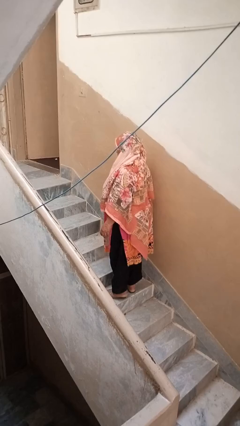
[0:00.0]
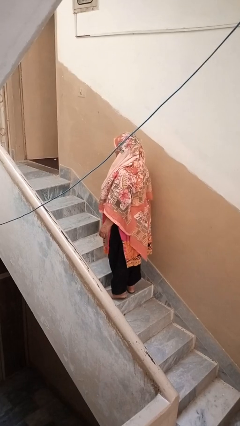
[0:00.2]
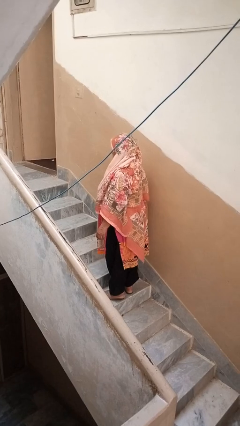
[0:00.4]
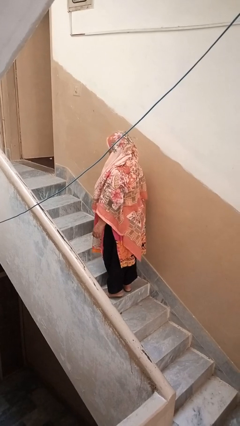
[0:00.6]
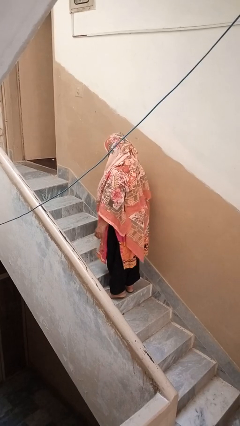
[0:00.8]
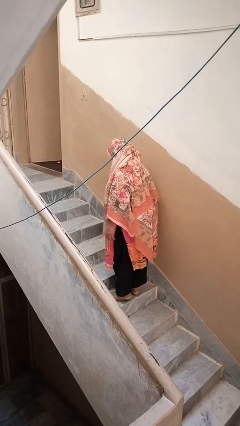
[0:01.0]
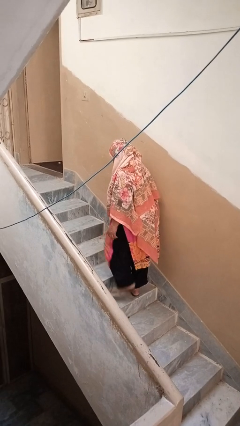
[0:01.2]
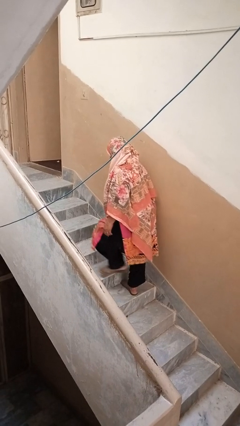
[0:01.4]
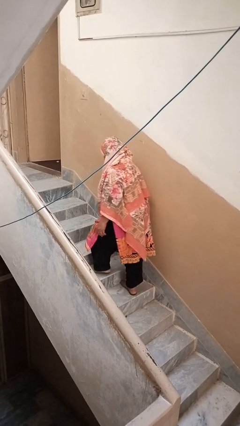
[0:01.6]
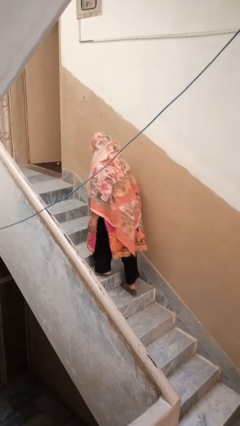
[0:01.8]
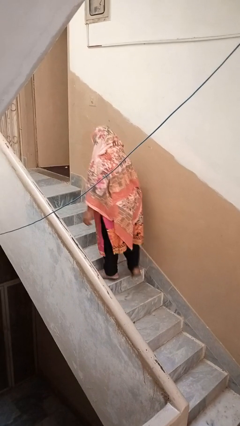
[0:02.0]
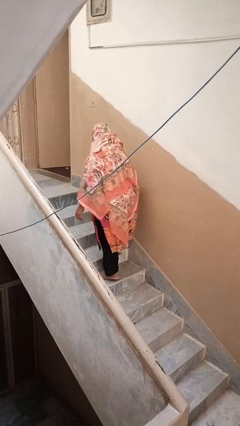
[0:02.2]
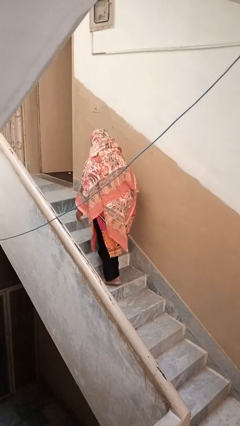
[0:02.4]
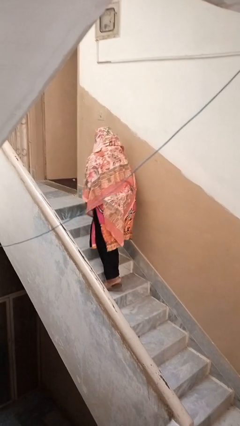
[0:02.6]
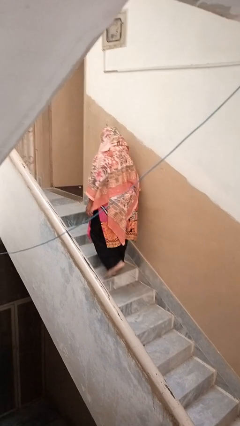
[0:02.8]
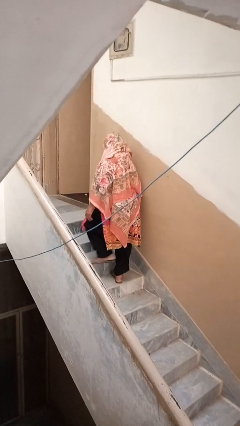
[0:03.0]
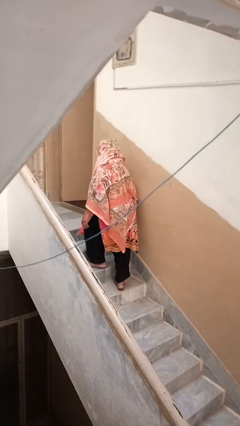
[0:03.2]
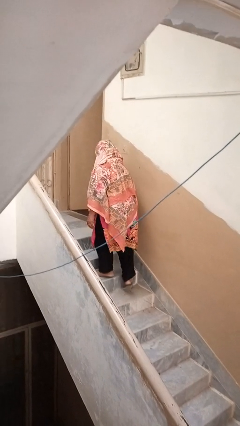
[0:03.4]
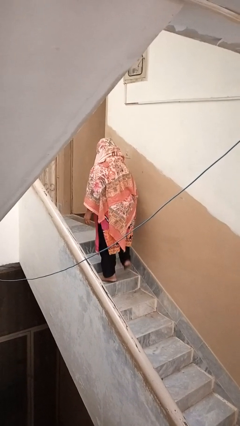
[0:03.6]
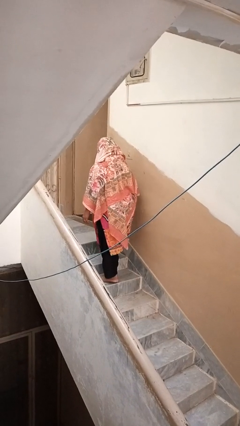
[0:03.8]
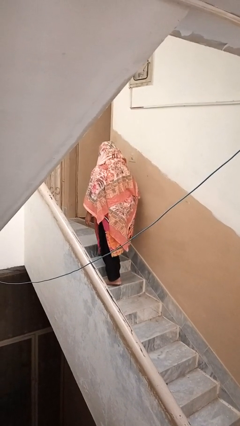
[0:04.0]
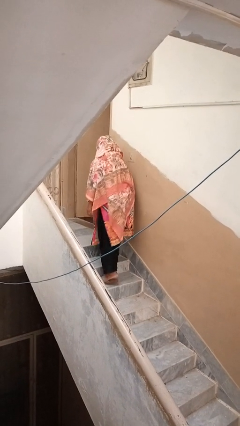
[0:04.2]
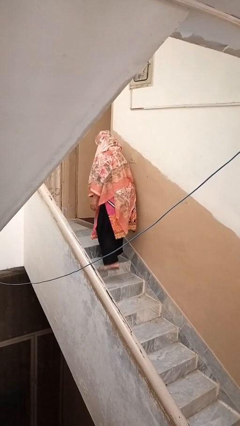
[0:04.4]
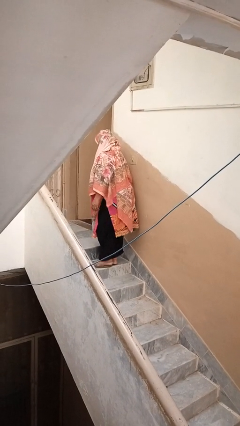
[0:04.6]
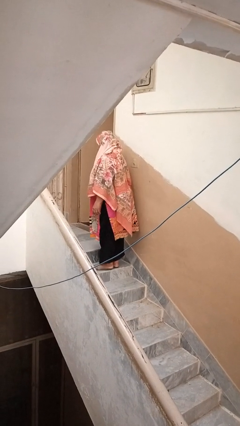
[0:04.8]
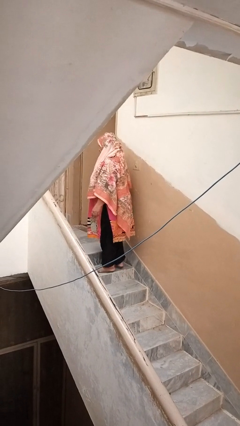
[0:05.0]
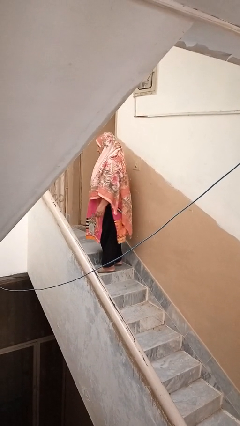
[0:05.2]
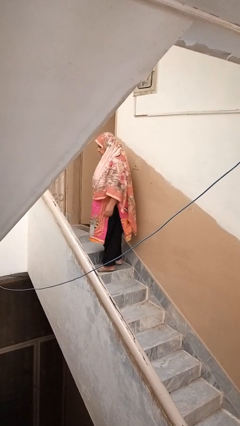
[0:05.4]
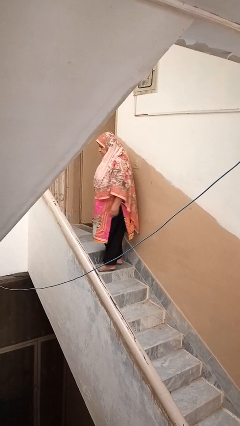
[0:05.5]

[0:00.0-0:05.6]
person climbs up stairs

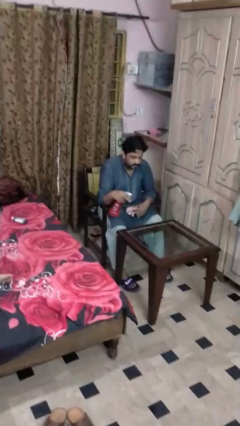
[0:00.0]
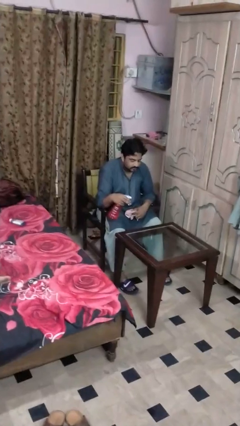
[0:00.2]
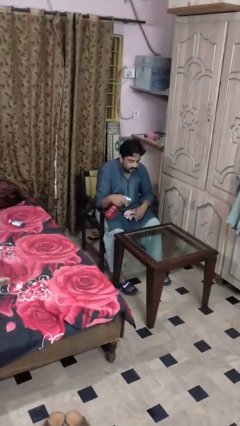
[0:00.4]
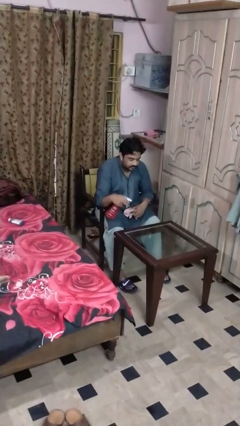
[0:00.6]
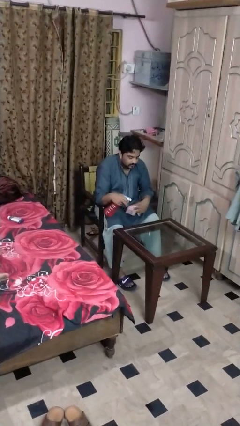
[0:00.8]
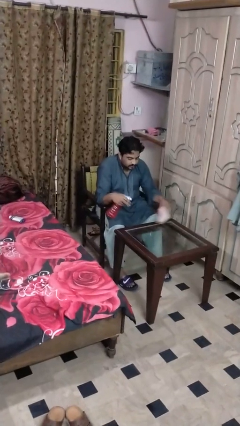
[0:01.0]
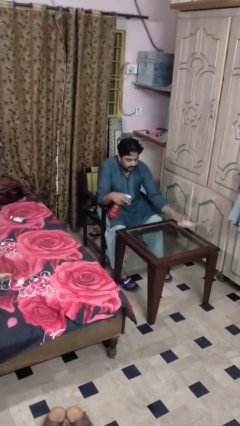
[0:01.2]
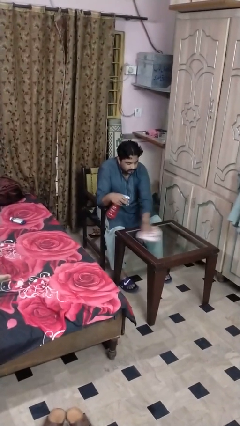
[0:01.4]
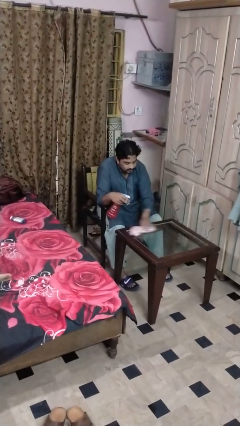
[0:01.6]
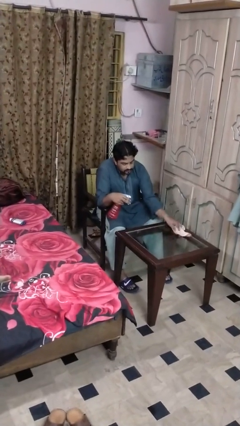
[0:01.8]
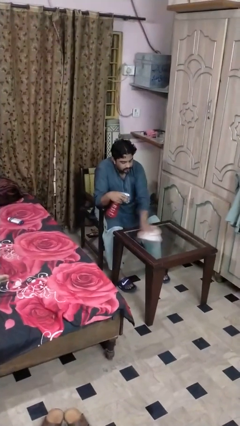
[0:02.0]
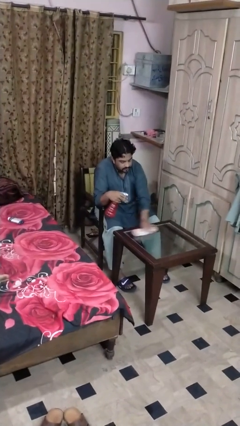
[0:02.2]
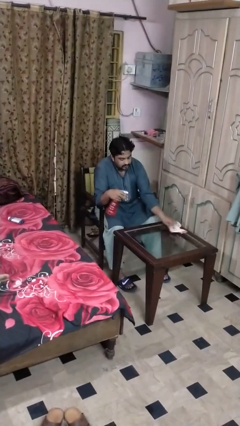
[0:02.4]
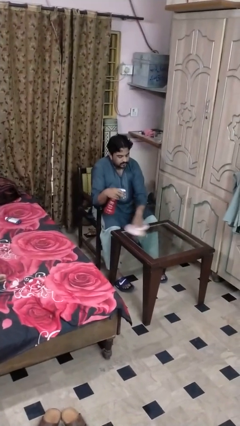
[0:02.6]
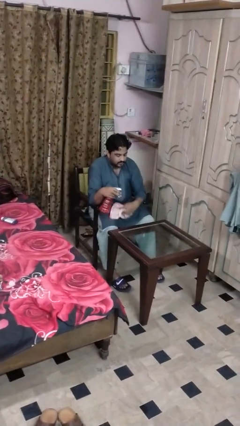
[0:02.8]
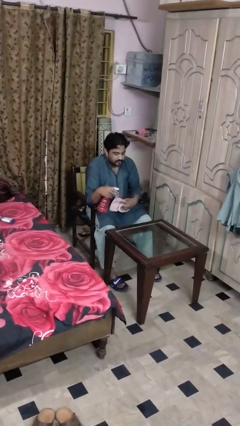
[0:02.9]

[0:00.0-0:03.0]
person cleans table with rag

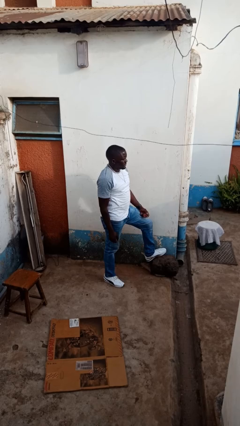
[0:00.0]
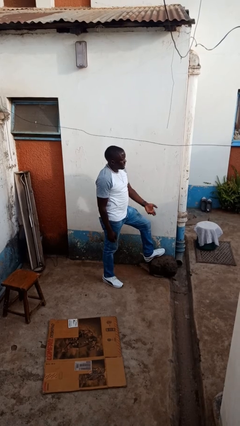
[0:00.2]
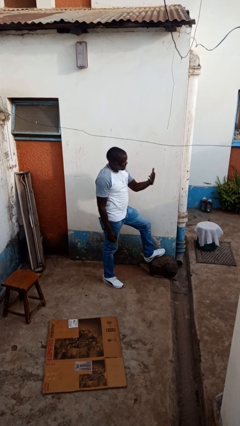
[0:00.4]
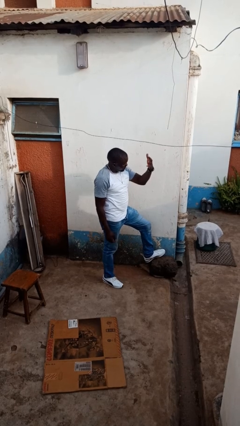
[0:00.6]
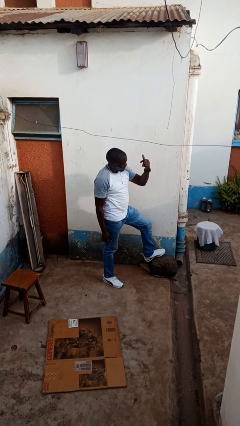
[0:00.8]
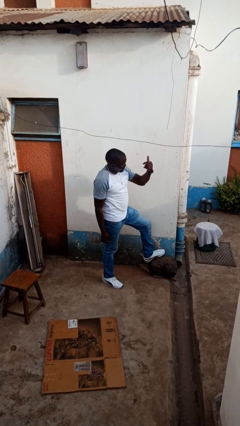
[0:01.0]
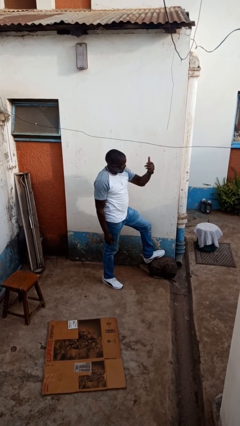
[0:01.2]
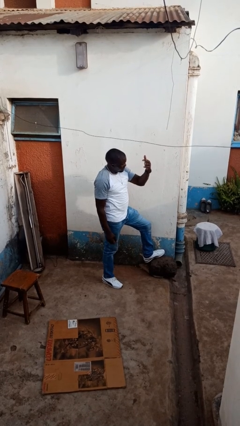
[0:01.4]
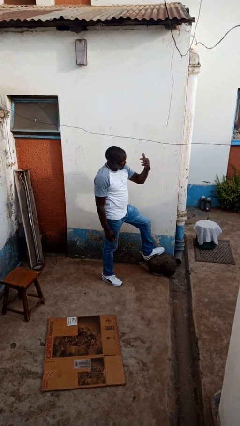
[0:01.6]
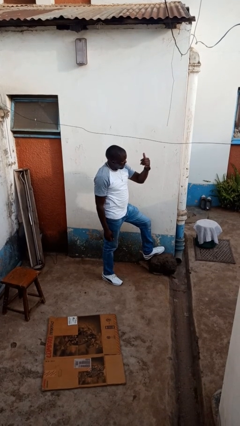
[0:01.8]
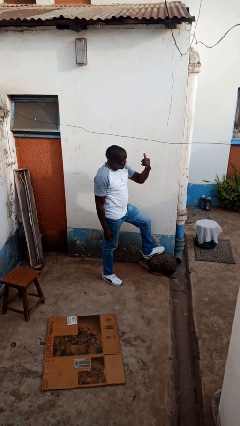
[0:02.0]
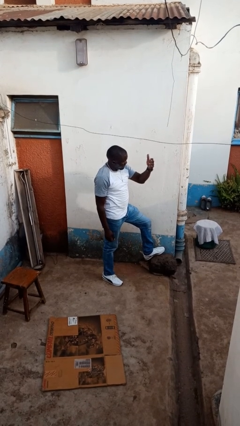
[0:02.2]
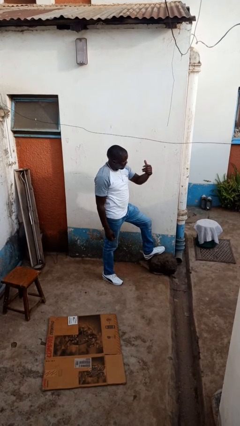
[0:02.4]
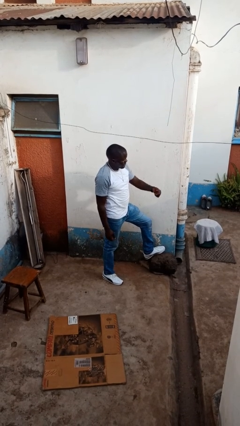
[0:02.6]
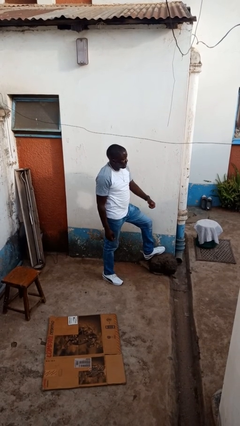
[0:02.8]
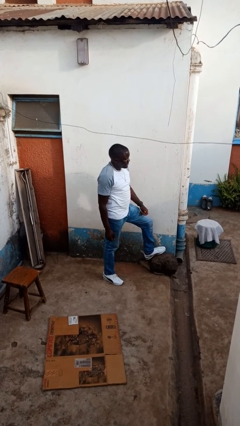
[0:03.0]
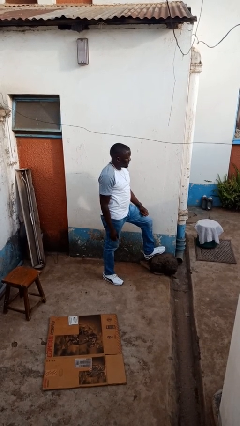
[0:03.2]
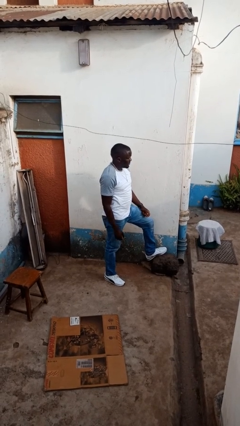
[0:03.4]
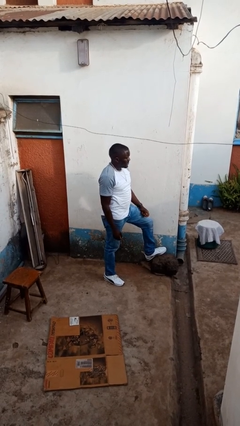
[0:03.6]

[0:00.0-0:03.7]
person gestures come here

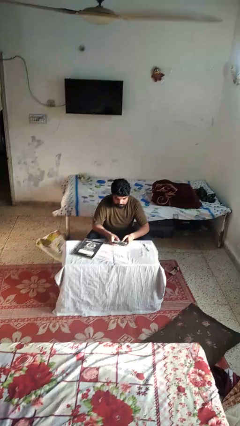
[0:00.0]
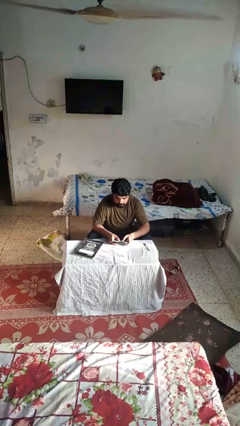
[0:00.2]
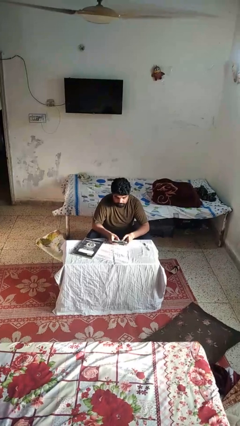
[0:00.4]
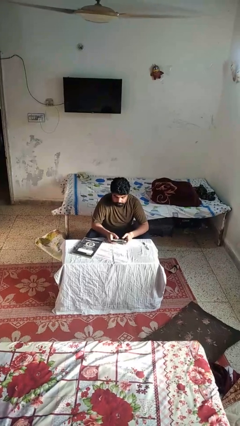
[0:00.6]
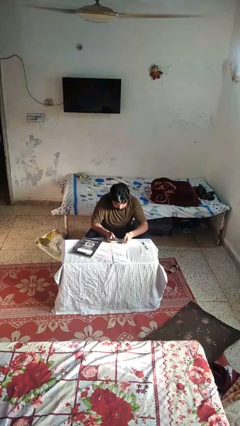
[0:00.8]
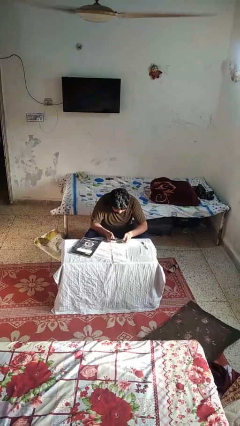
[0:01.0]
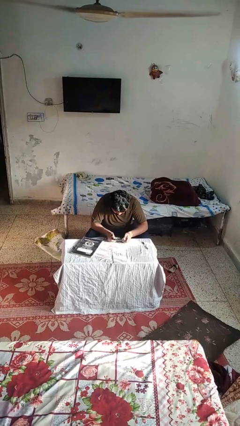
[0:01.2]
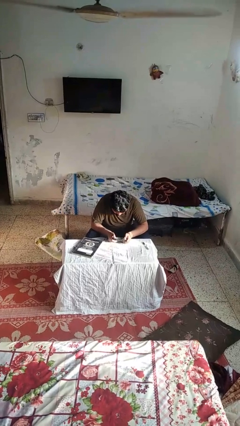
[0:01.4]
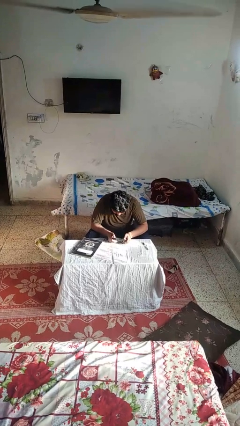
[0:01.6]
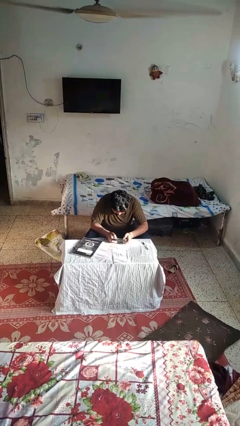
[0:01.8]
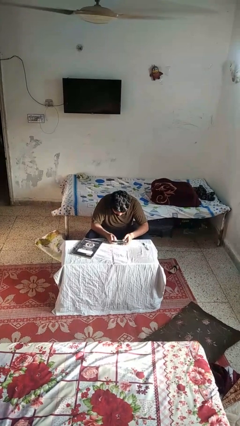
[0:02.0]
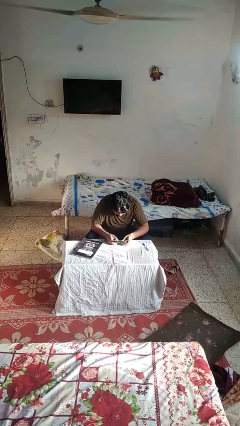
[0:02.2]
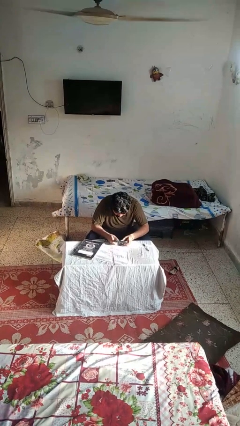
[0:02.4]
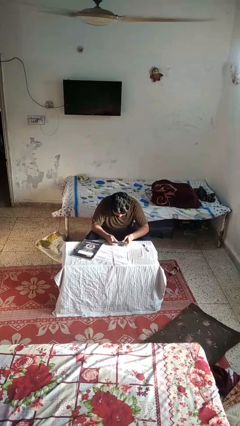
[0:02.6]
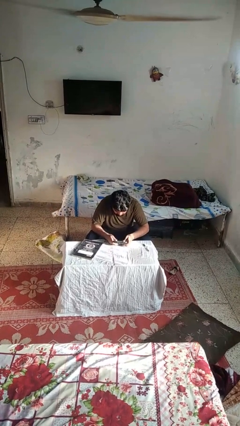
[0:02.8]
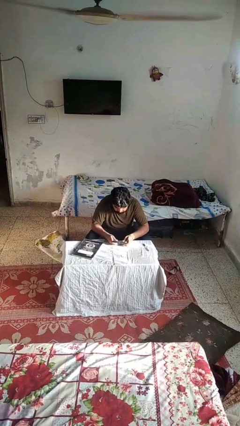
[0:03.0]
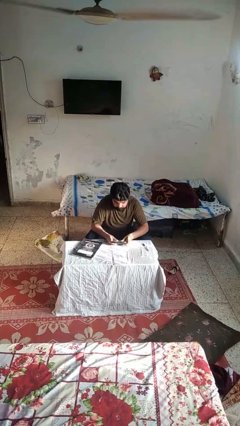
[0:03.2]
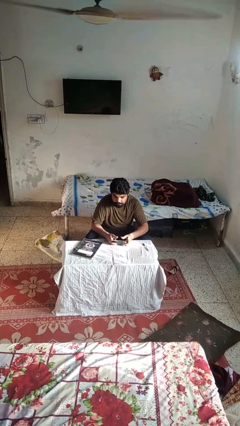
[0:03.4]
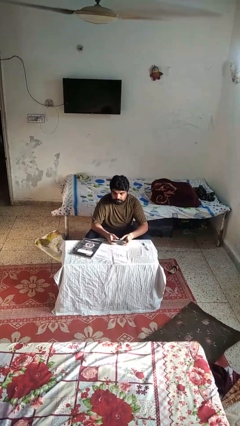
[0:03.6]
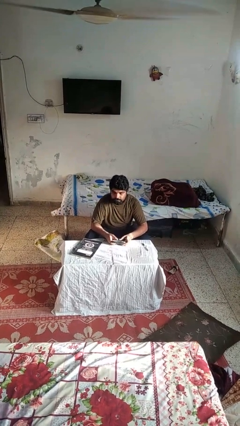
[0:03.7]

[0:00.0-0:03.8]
person interacts with handheld game

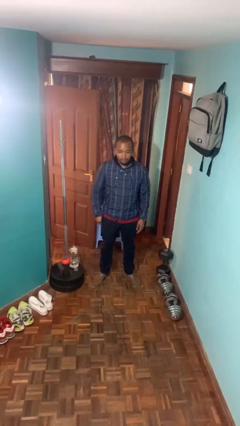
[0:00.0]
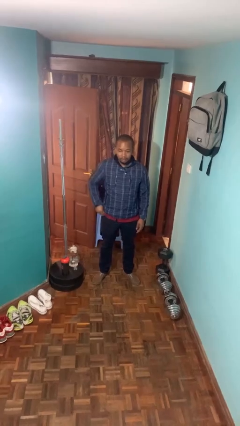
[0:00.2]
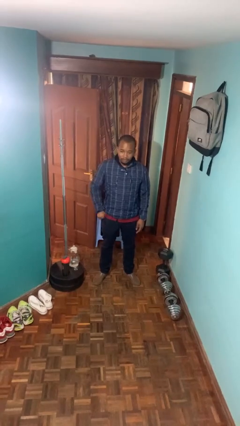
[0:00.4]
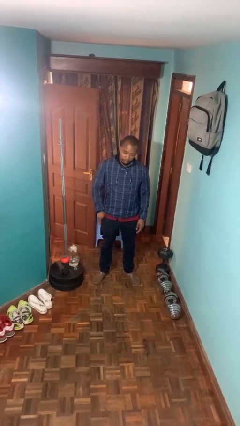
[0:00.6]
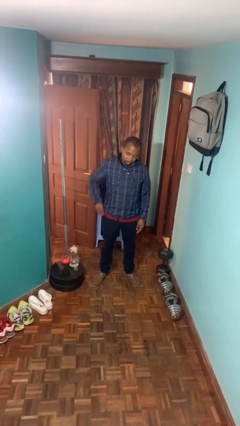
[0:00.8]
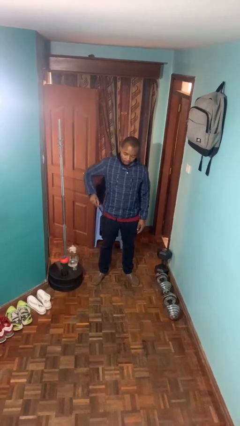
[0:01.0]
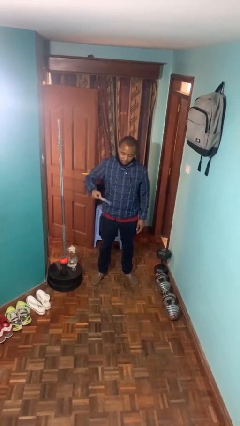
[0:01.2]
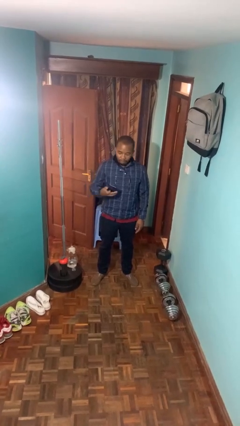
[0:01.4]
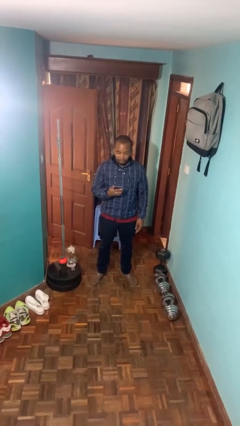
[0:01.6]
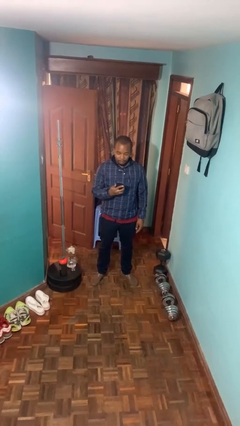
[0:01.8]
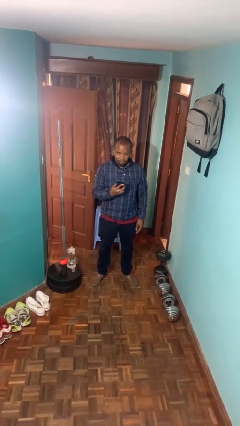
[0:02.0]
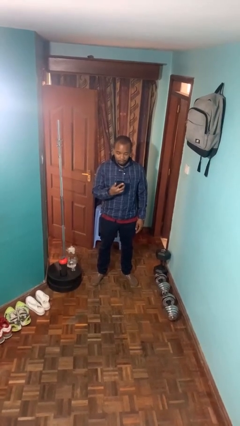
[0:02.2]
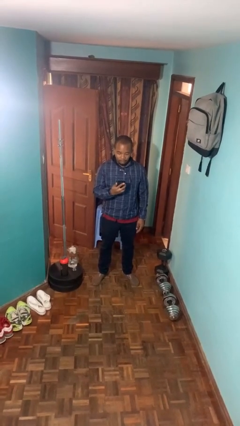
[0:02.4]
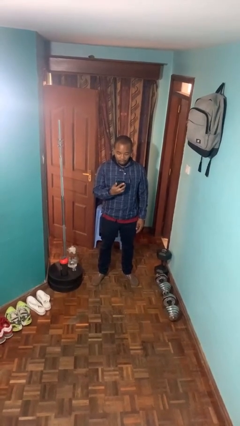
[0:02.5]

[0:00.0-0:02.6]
person takes phone from pocket
